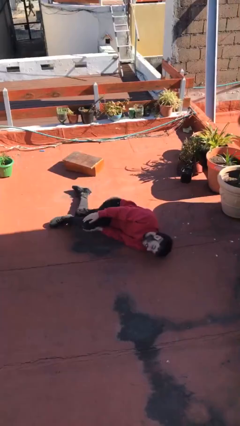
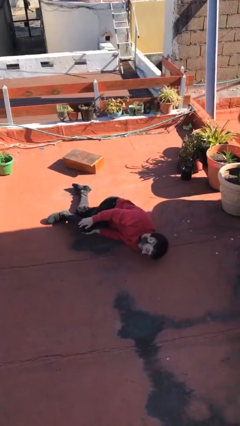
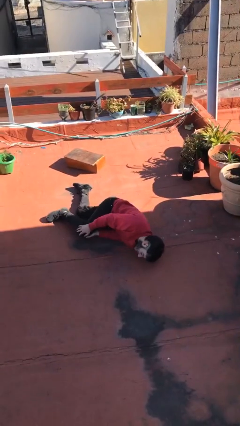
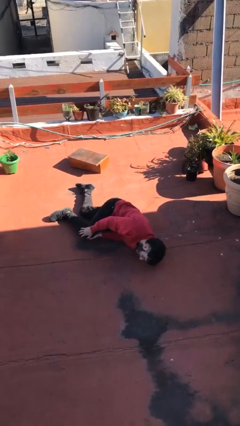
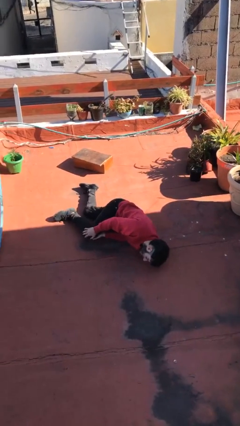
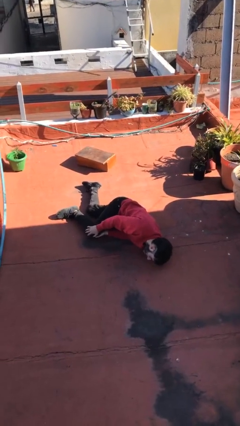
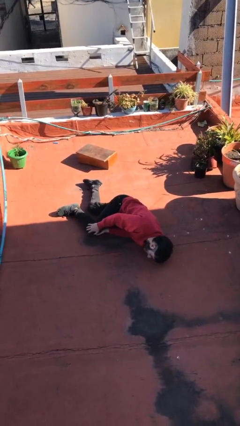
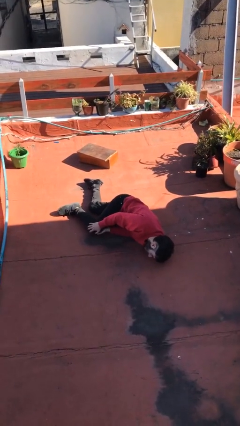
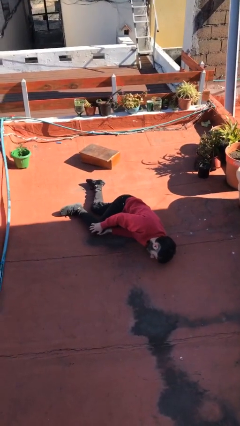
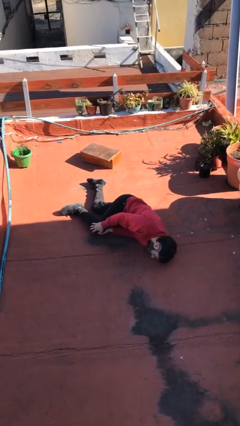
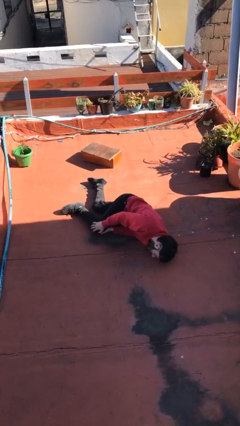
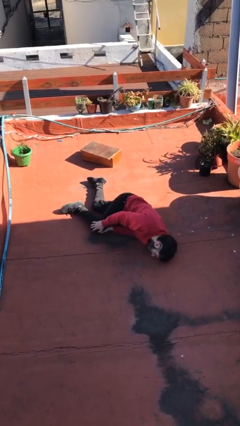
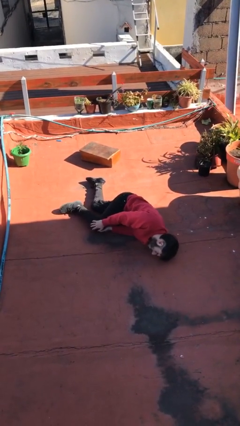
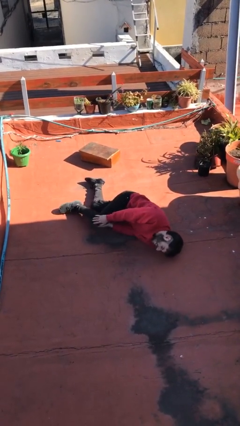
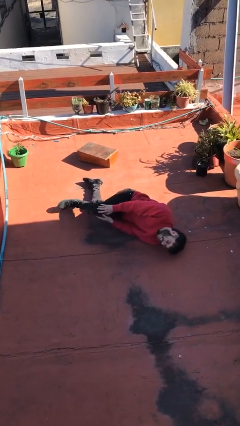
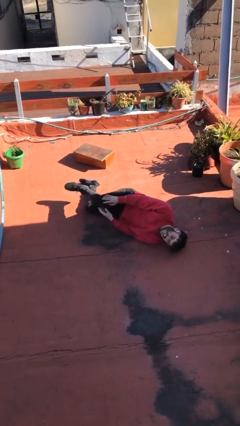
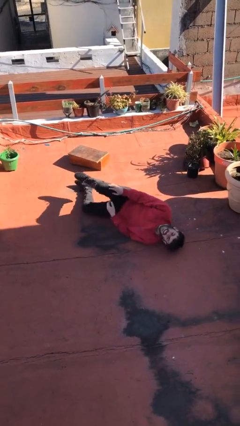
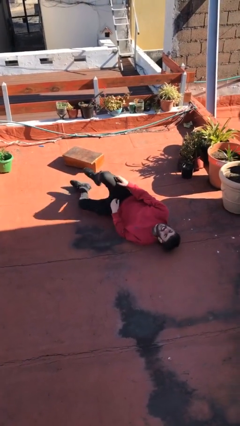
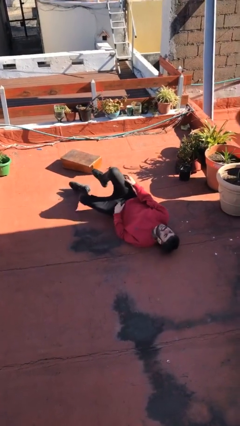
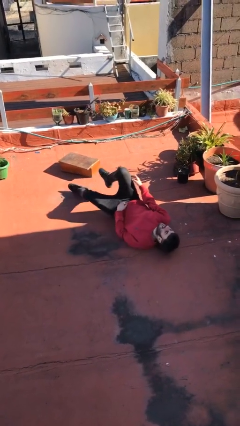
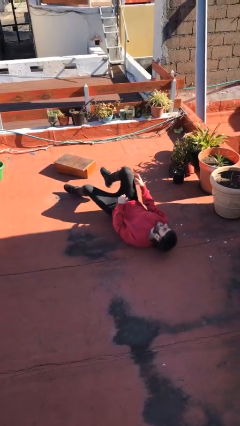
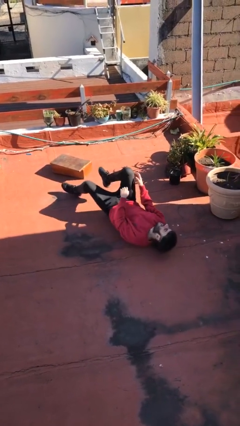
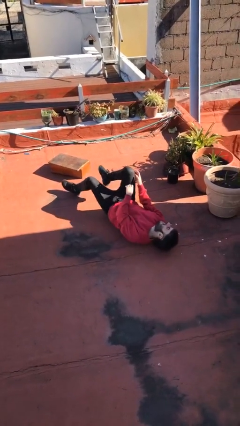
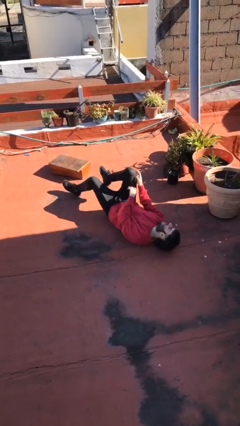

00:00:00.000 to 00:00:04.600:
person lies down on floor

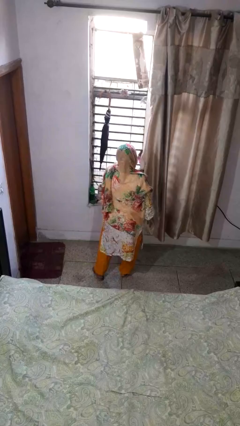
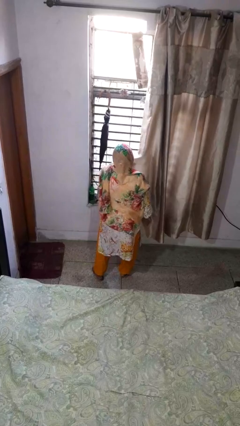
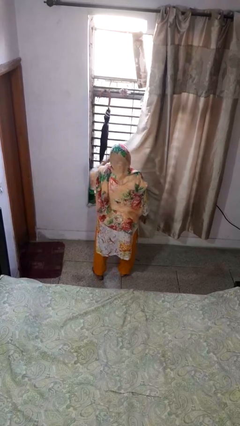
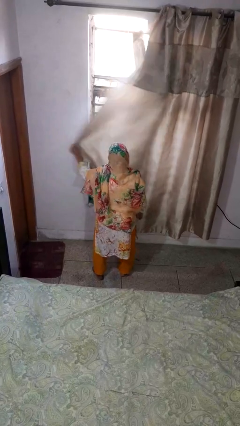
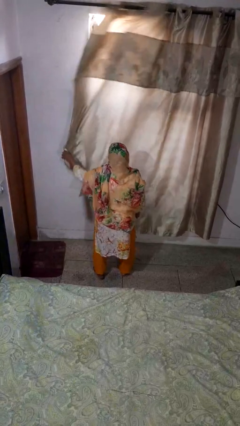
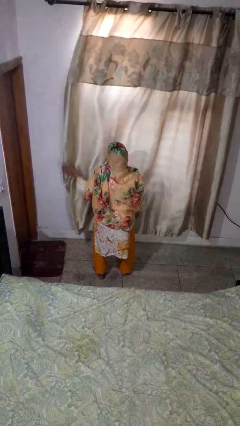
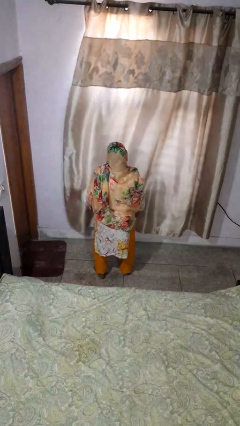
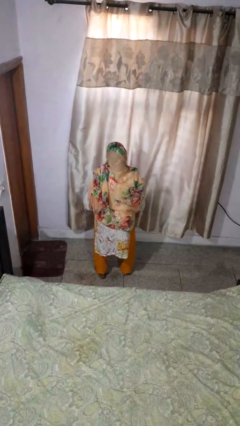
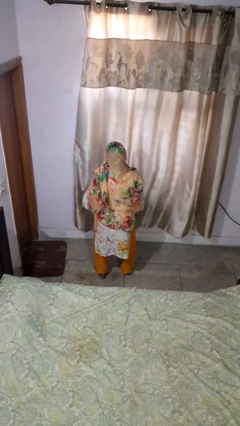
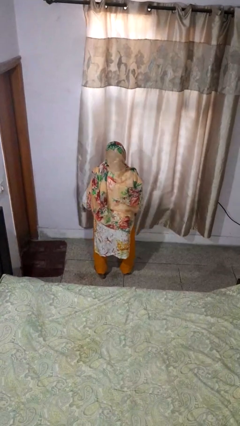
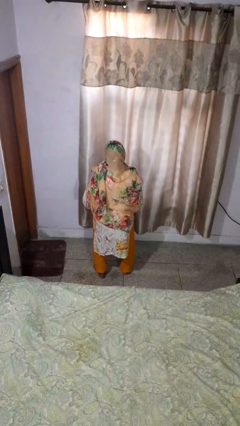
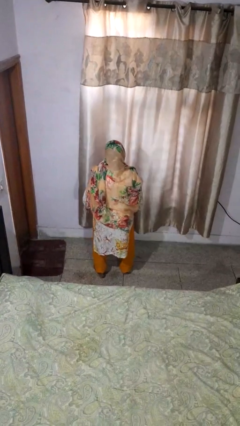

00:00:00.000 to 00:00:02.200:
person closes curtains

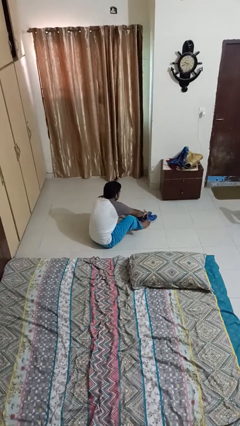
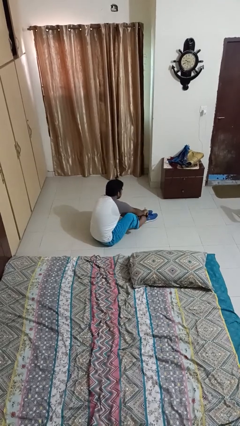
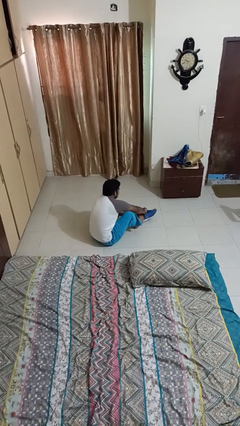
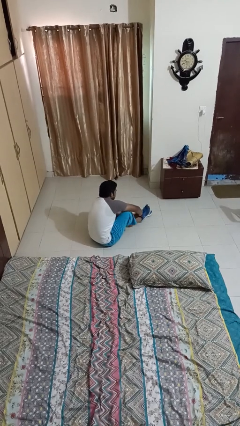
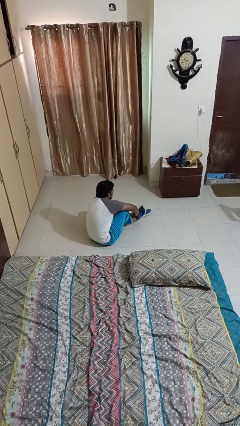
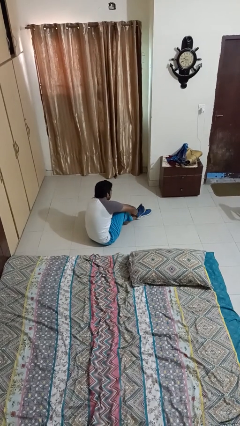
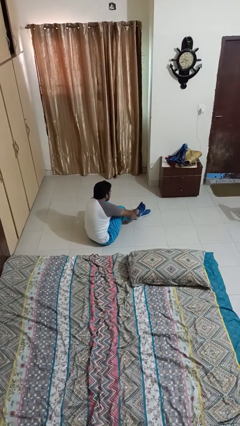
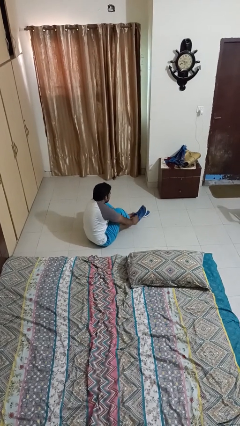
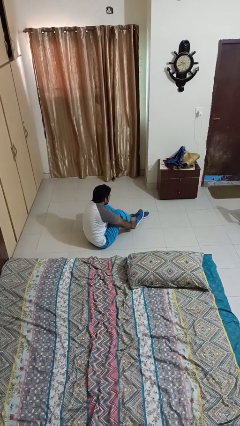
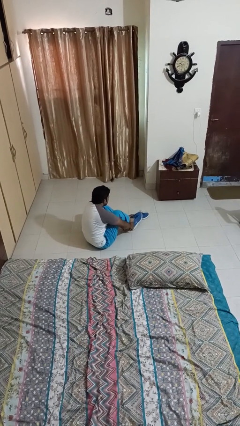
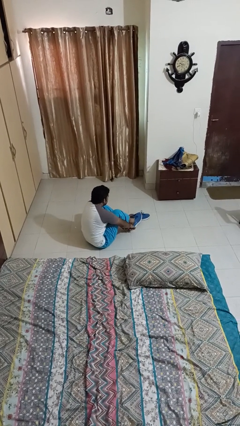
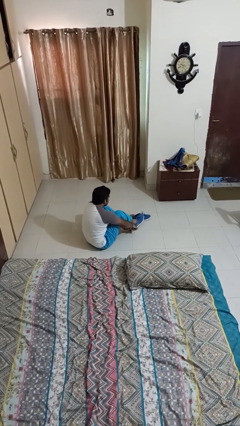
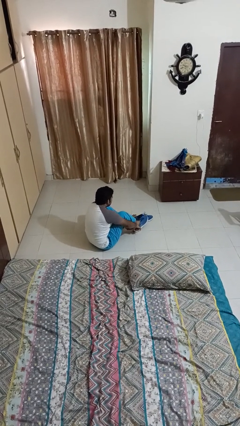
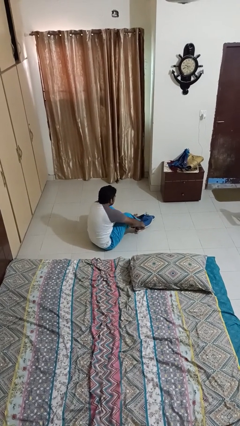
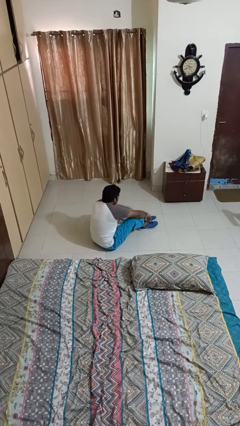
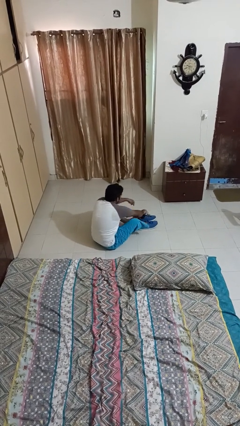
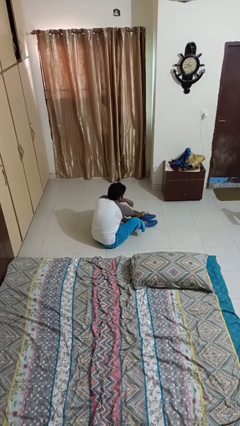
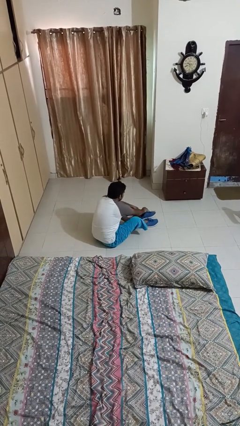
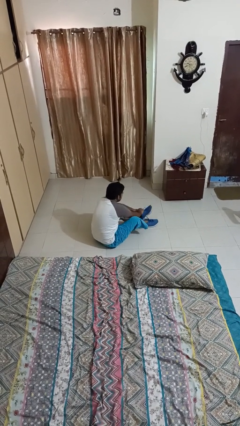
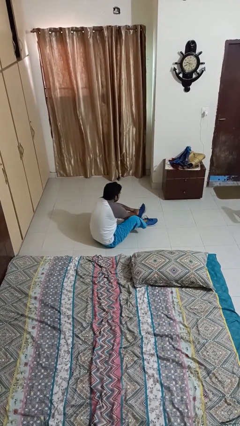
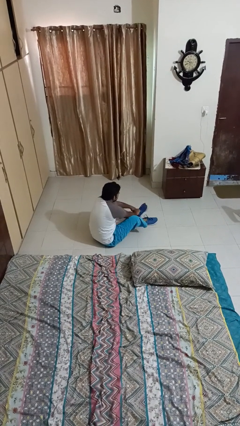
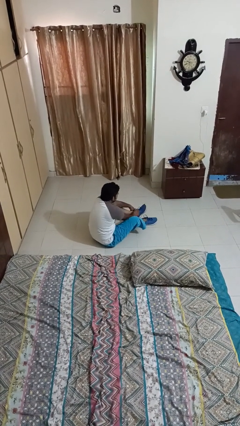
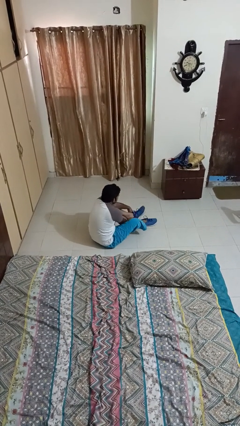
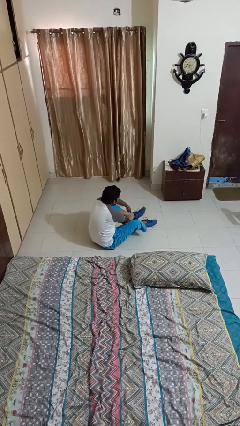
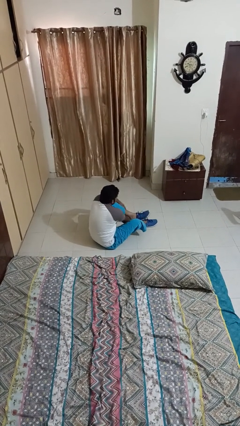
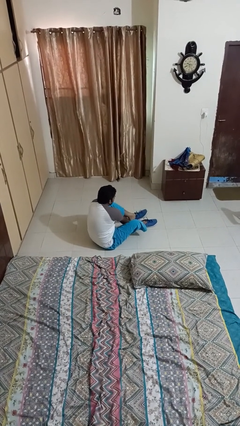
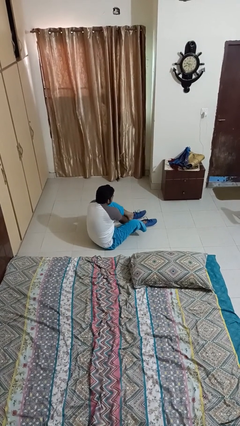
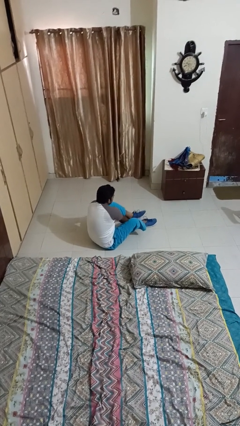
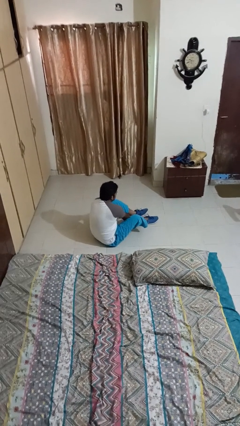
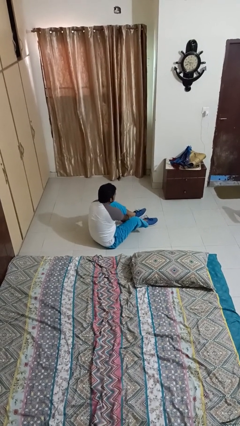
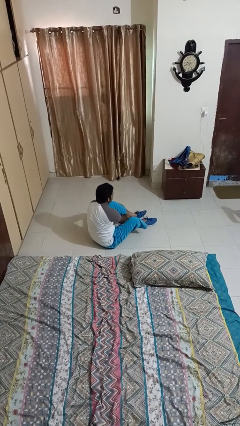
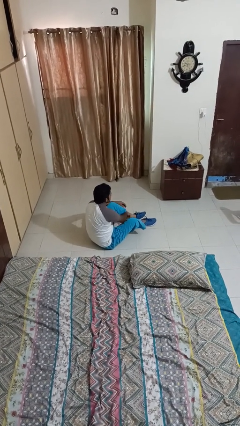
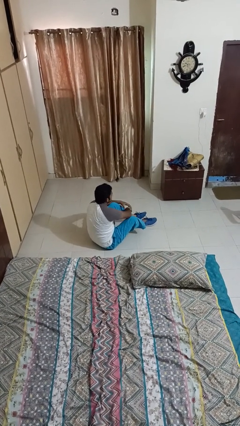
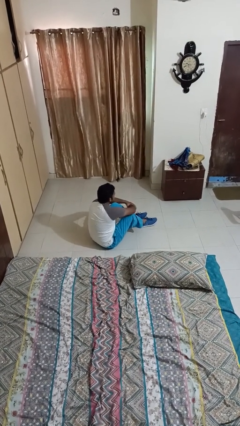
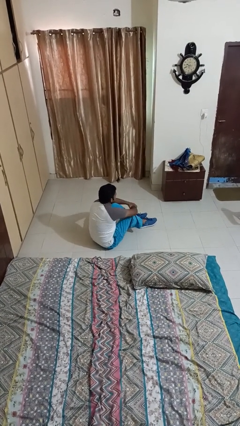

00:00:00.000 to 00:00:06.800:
person puts on shoes

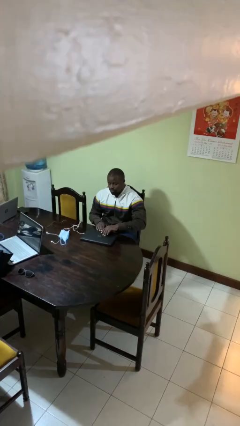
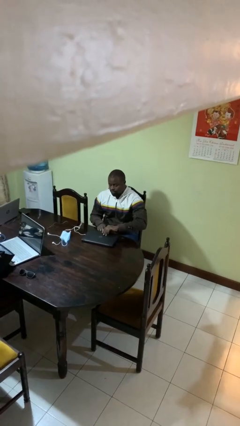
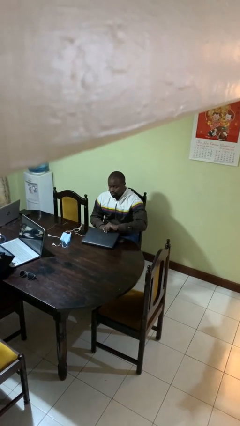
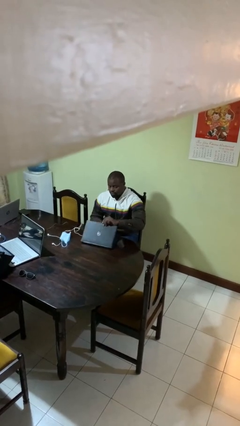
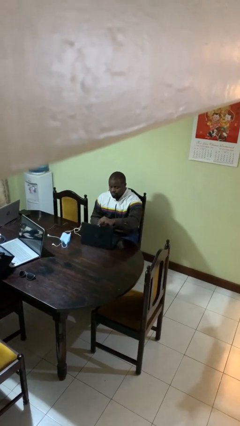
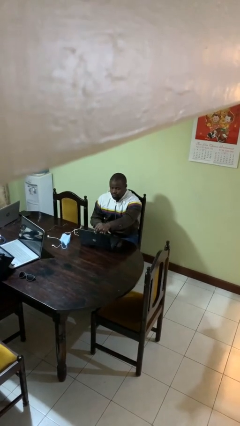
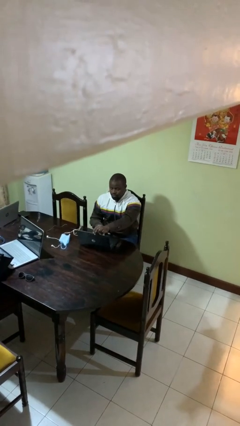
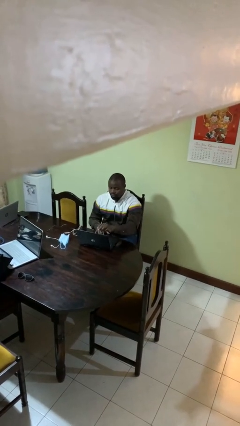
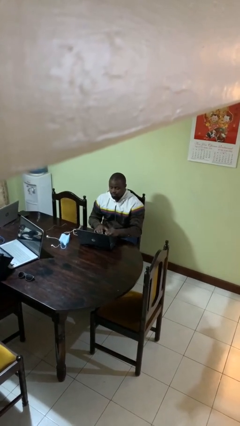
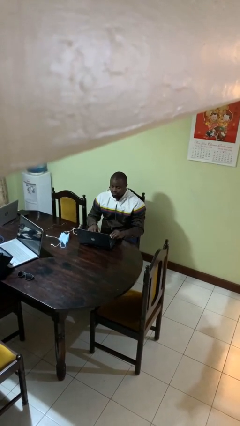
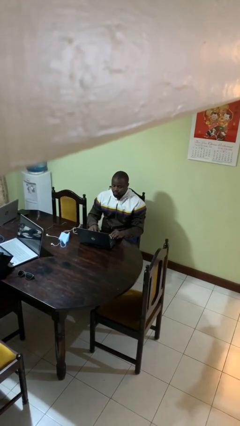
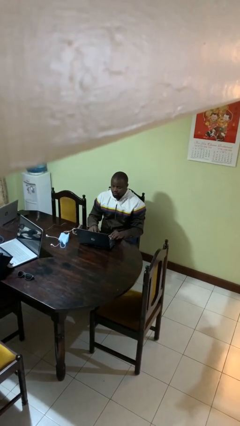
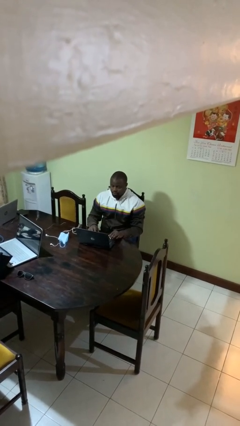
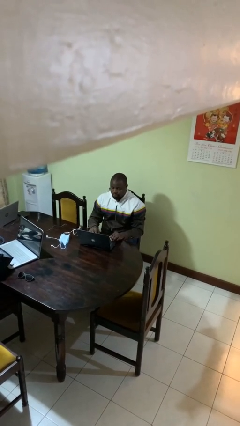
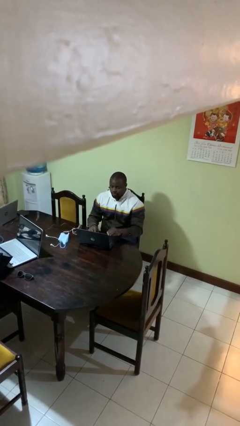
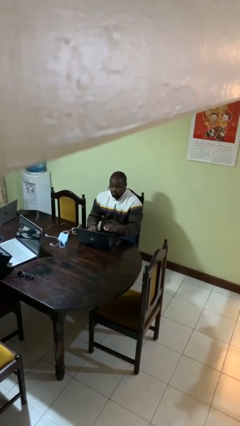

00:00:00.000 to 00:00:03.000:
person opens laptop

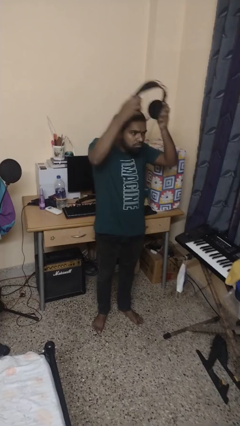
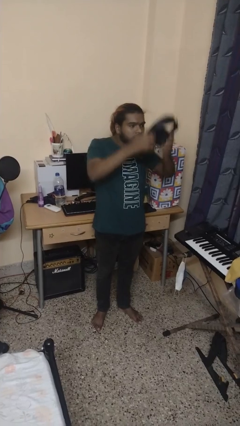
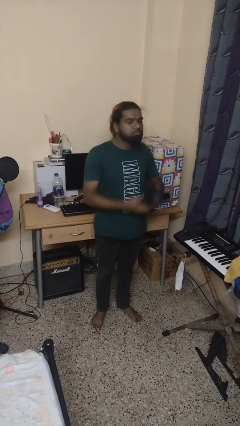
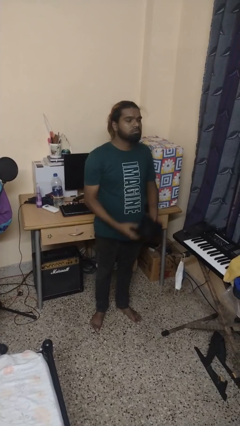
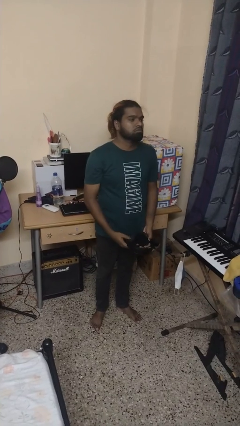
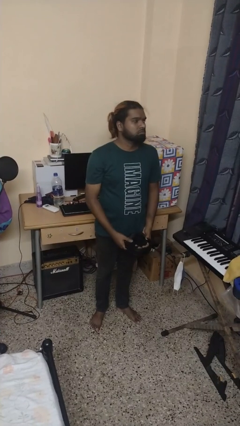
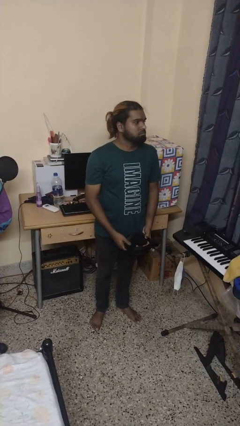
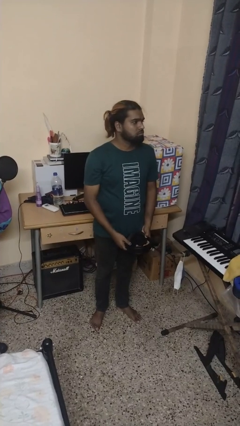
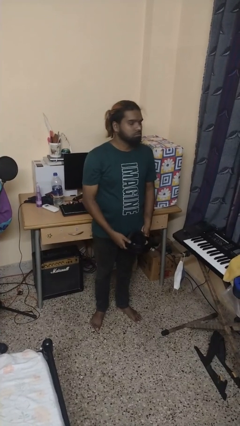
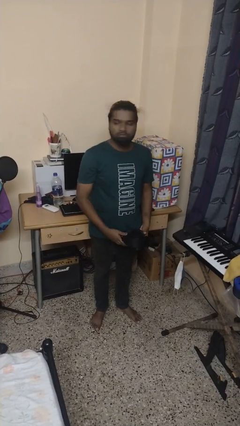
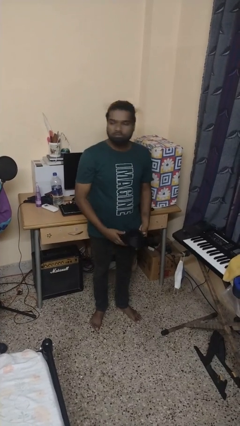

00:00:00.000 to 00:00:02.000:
person takes off headphones
